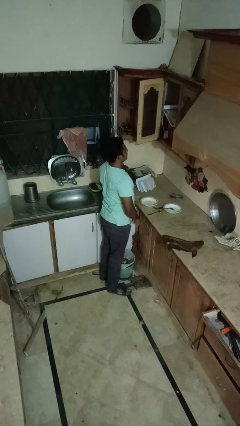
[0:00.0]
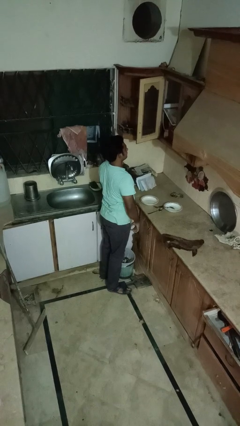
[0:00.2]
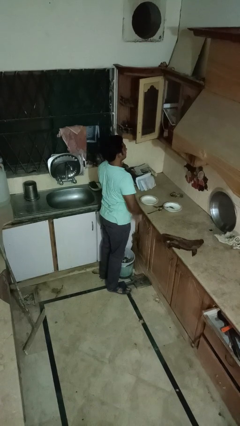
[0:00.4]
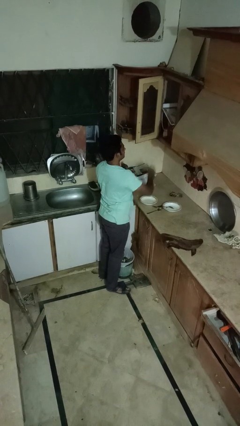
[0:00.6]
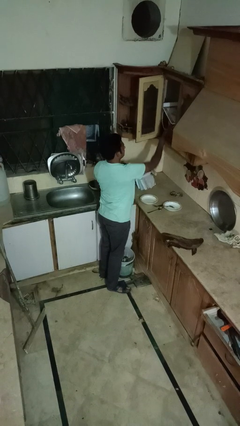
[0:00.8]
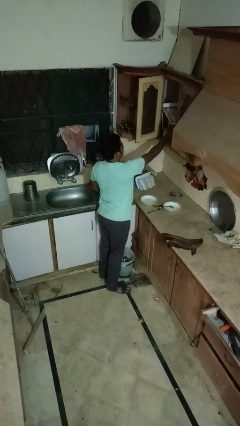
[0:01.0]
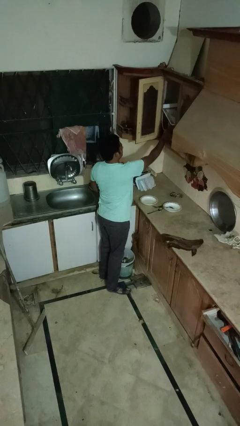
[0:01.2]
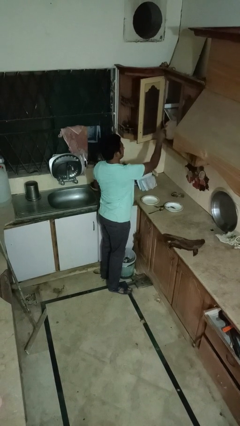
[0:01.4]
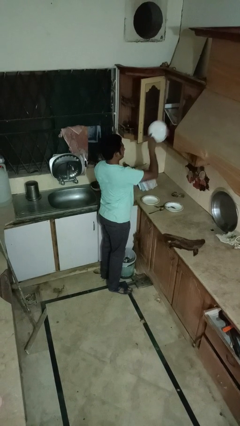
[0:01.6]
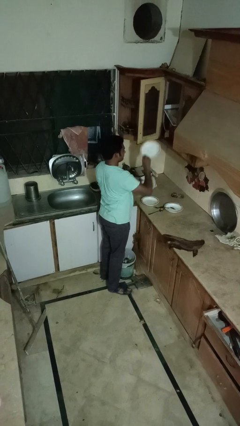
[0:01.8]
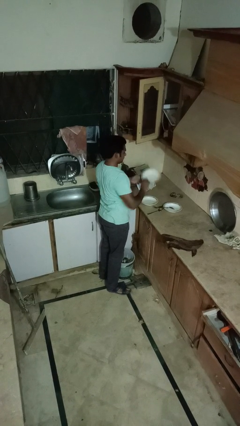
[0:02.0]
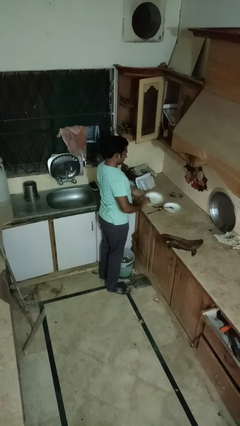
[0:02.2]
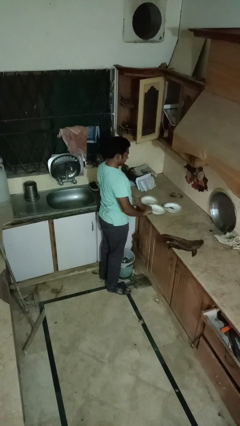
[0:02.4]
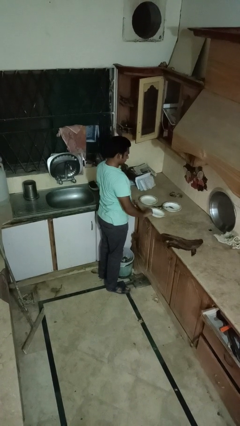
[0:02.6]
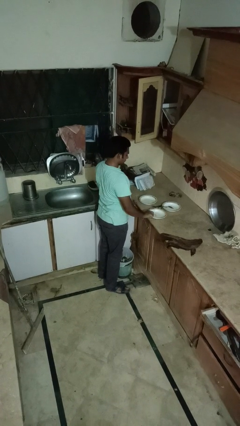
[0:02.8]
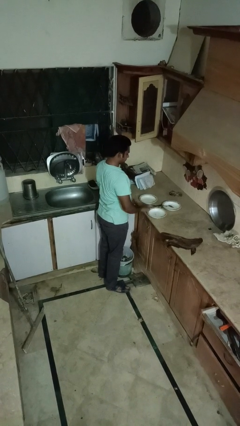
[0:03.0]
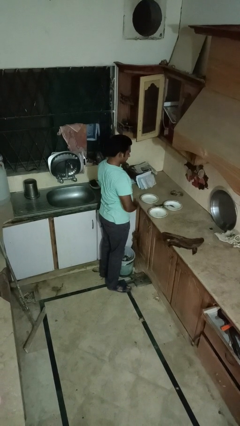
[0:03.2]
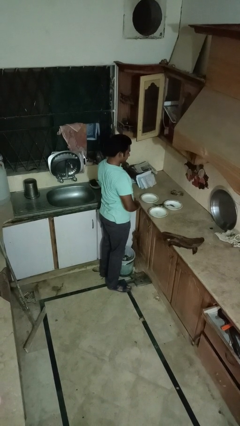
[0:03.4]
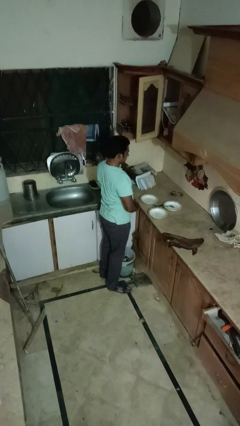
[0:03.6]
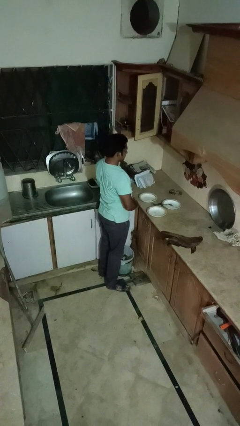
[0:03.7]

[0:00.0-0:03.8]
person takes object from cabinet

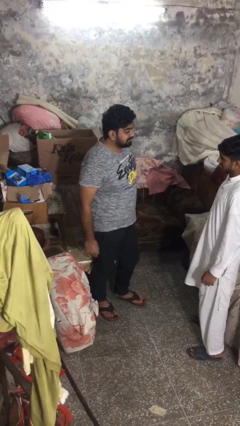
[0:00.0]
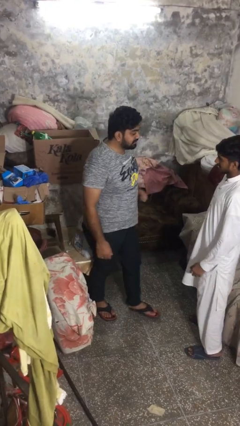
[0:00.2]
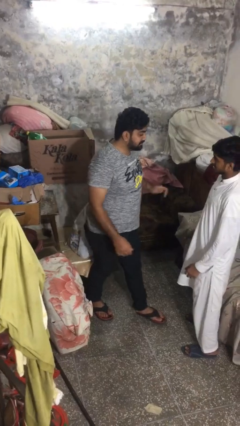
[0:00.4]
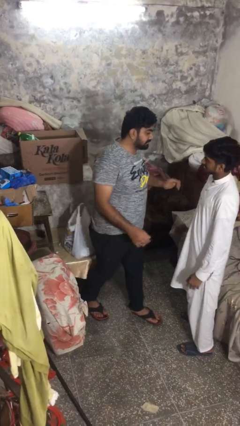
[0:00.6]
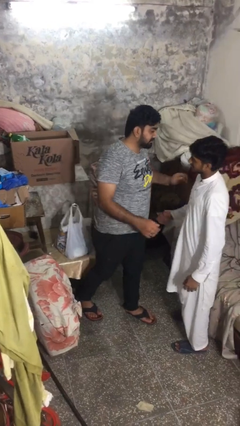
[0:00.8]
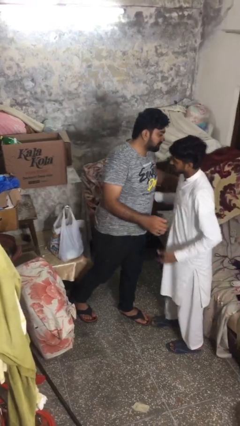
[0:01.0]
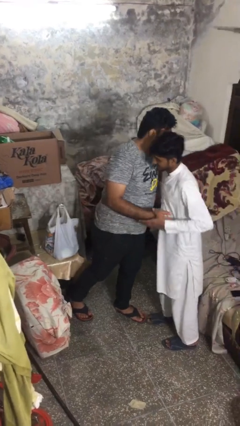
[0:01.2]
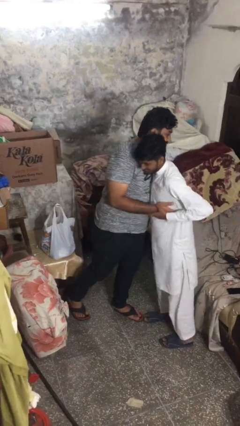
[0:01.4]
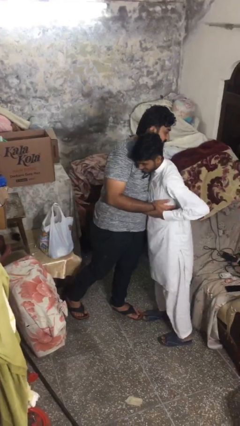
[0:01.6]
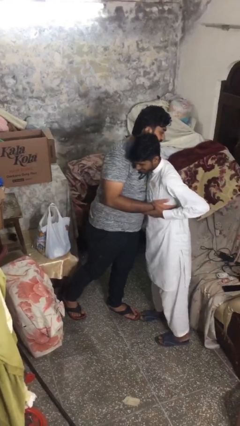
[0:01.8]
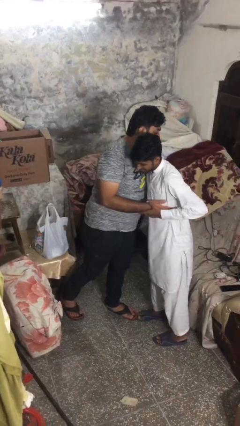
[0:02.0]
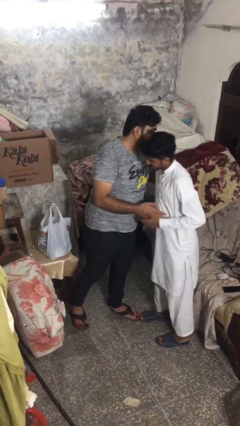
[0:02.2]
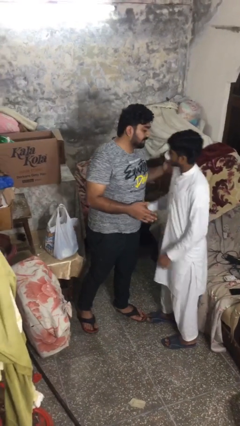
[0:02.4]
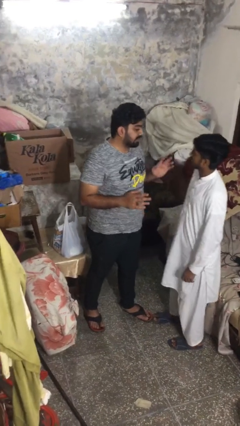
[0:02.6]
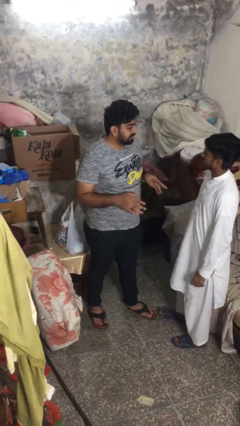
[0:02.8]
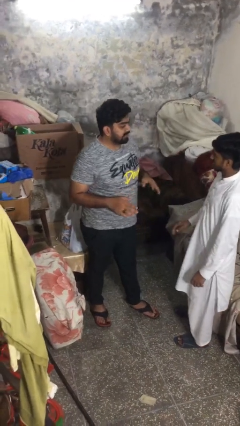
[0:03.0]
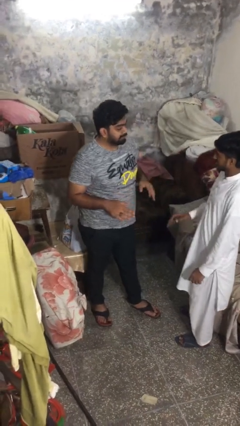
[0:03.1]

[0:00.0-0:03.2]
person embraces person

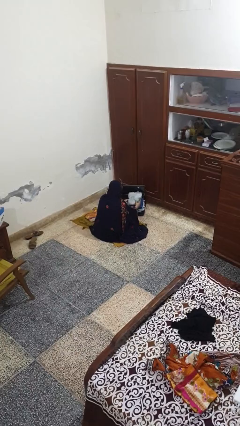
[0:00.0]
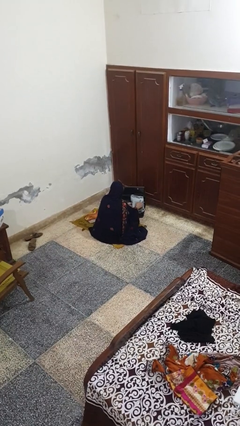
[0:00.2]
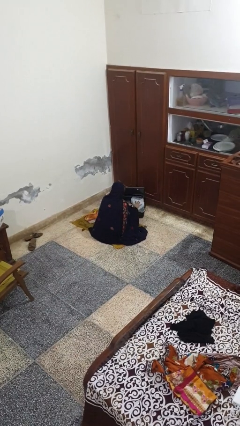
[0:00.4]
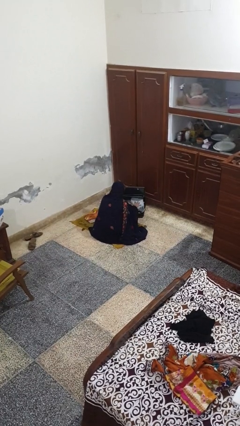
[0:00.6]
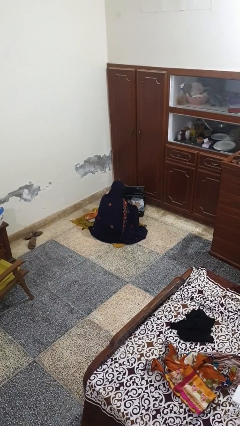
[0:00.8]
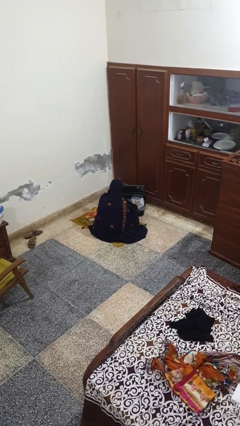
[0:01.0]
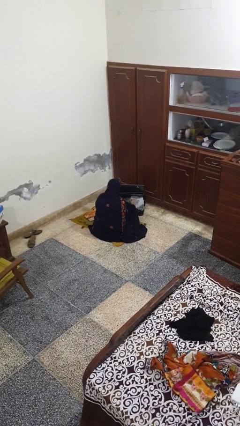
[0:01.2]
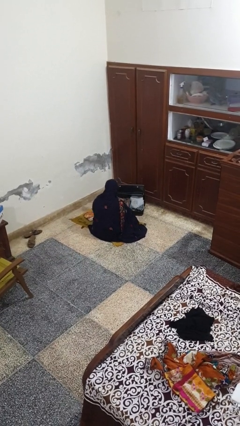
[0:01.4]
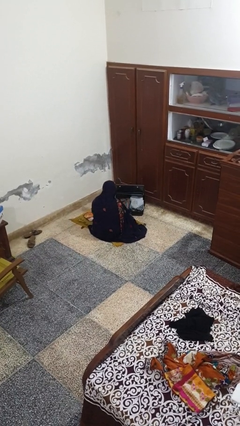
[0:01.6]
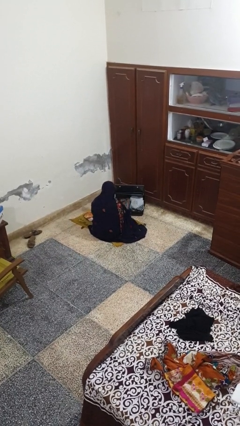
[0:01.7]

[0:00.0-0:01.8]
person loads clothes into suitcase

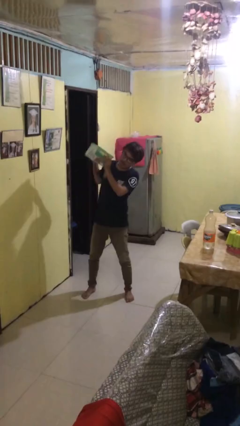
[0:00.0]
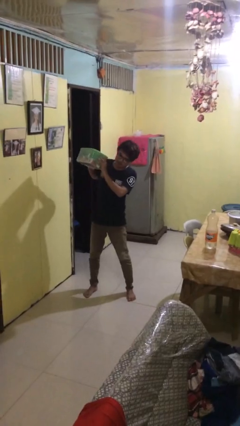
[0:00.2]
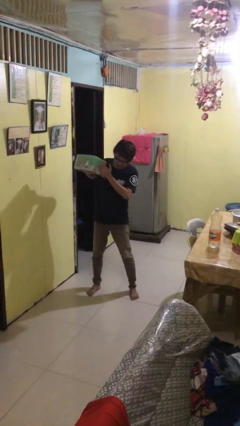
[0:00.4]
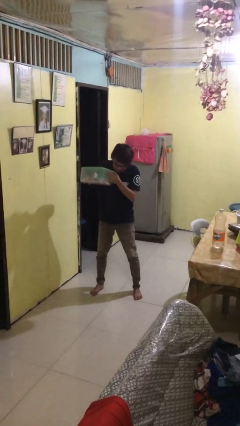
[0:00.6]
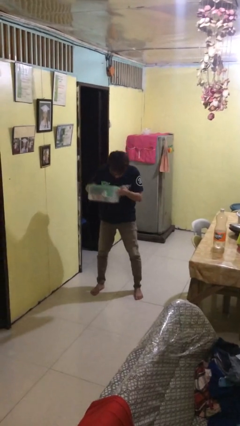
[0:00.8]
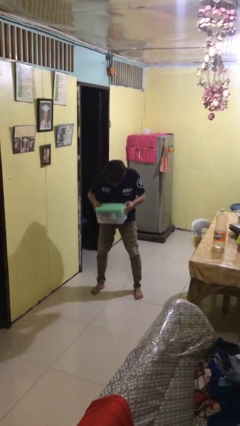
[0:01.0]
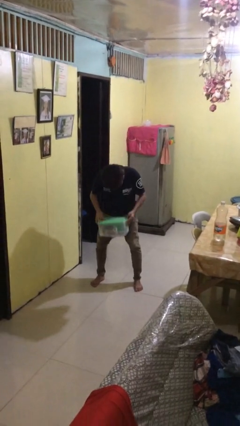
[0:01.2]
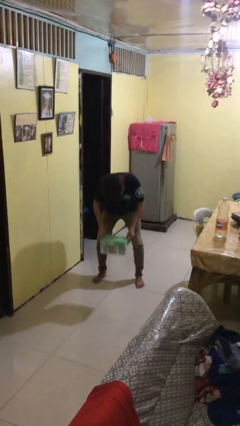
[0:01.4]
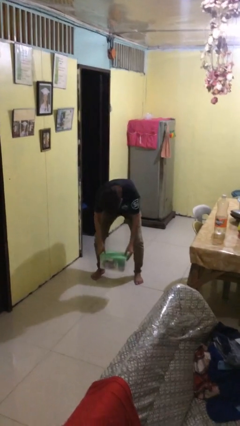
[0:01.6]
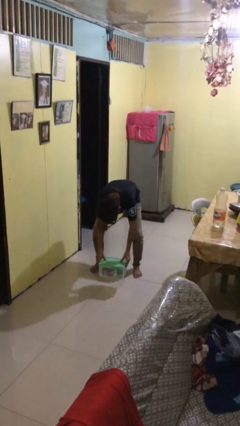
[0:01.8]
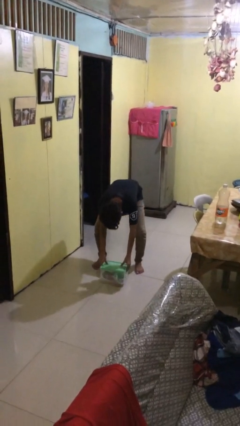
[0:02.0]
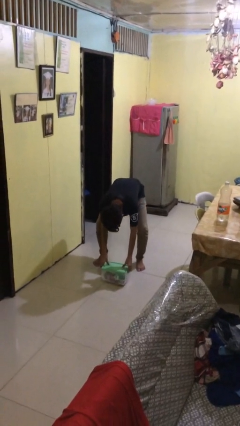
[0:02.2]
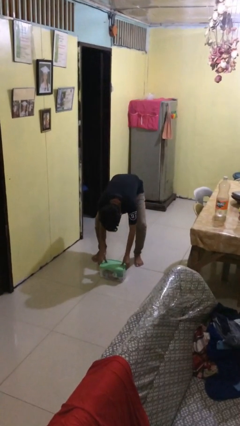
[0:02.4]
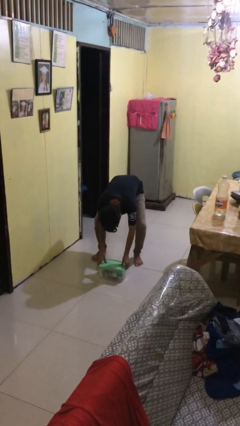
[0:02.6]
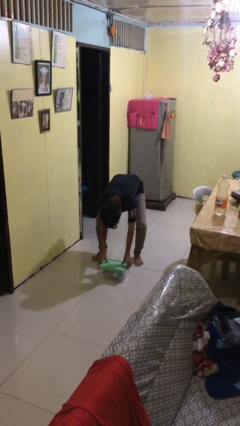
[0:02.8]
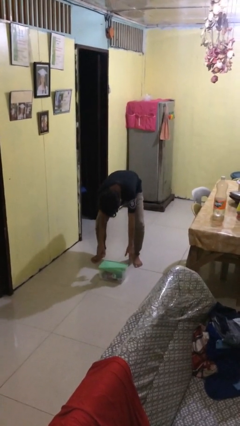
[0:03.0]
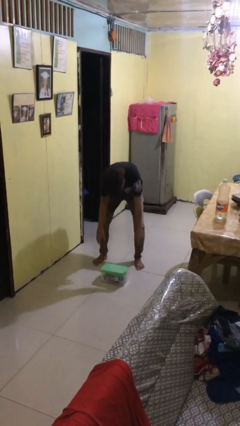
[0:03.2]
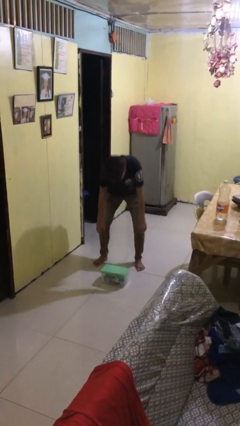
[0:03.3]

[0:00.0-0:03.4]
person puts down object on floor

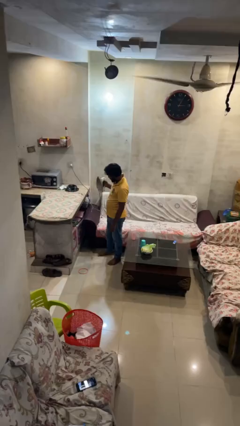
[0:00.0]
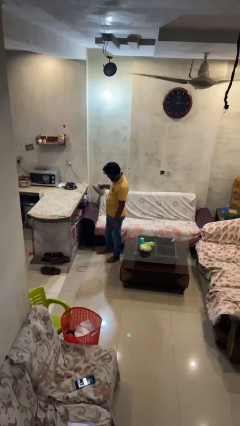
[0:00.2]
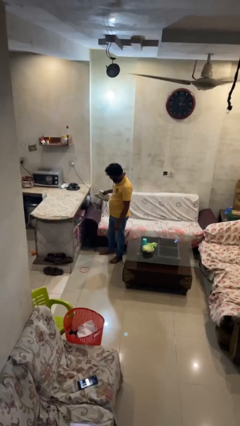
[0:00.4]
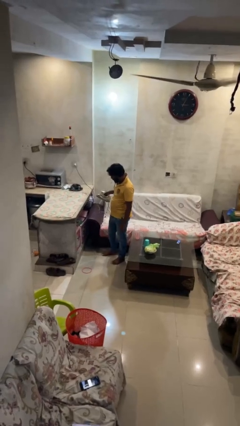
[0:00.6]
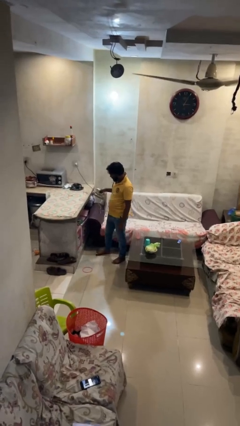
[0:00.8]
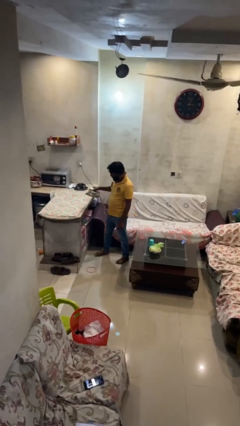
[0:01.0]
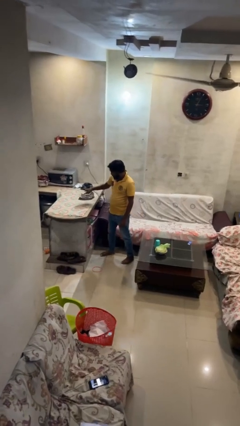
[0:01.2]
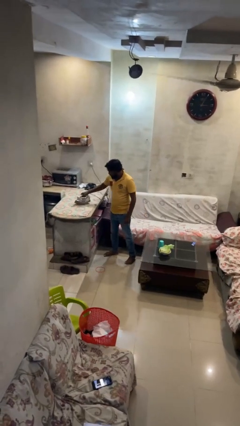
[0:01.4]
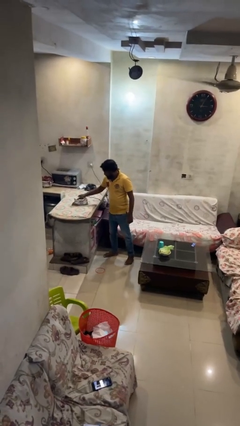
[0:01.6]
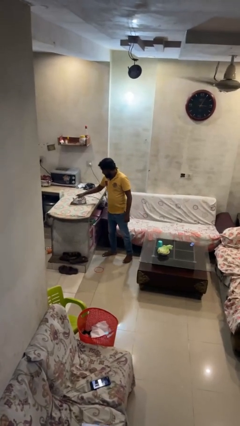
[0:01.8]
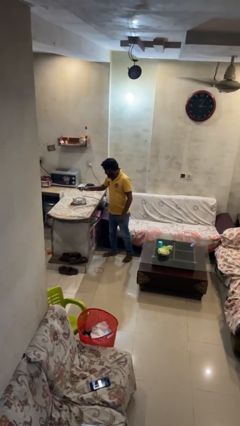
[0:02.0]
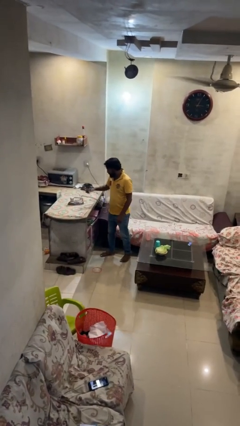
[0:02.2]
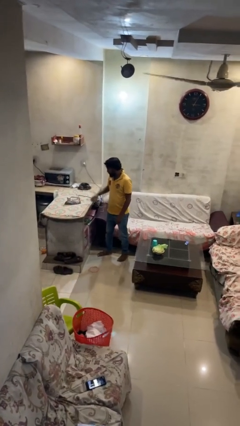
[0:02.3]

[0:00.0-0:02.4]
person puts down object on countertop

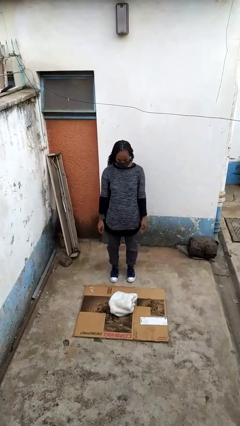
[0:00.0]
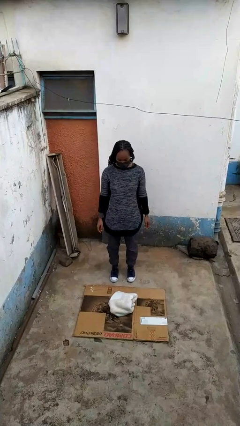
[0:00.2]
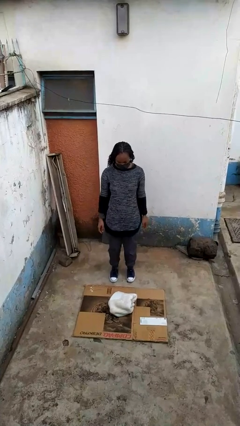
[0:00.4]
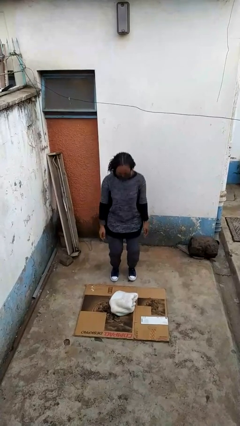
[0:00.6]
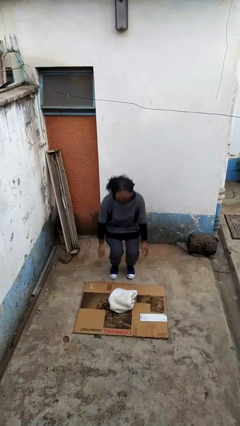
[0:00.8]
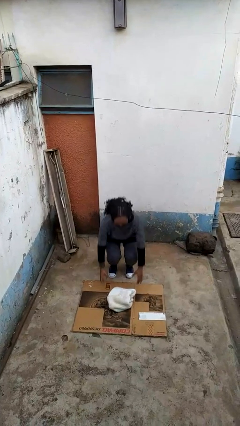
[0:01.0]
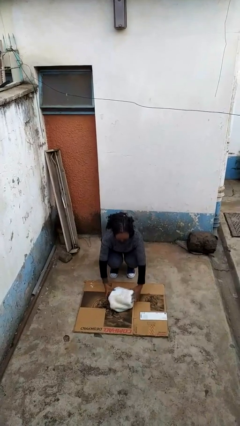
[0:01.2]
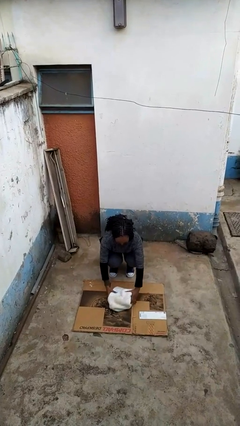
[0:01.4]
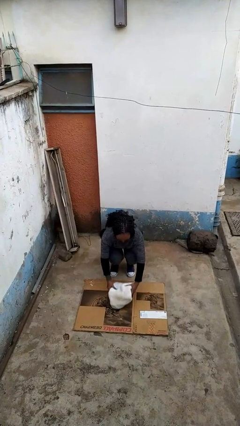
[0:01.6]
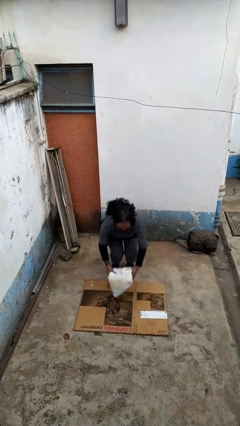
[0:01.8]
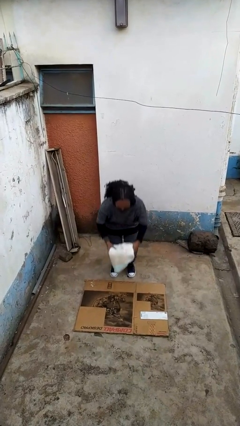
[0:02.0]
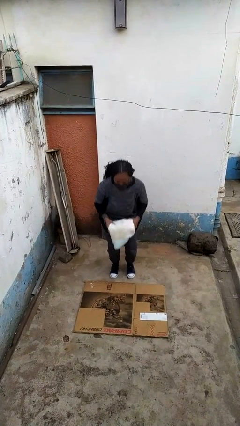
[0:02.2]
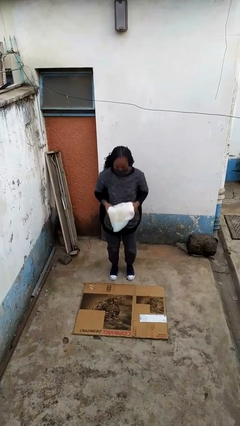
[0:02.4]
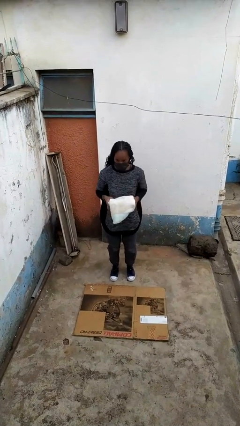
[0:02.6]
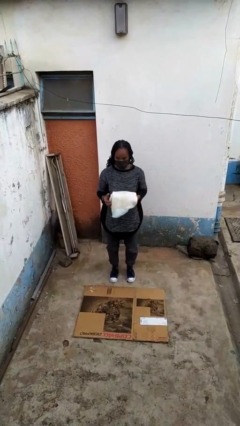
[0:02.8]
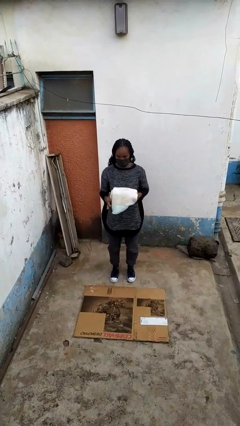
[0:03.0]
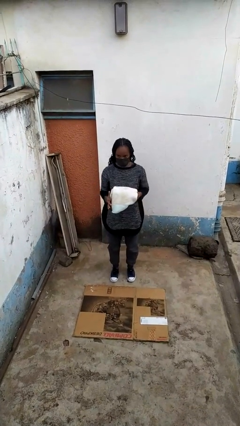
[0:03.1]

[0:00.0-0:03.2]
person picks up object from floor
